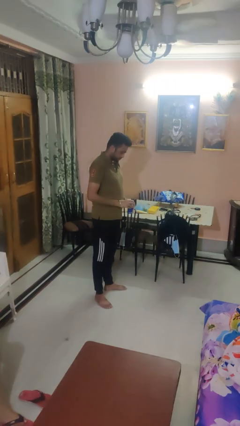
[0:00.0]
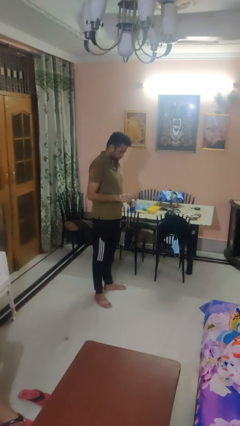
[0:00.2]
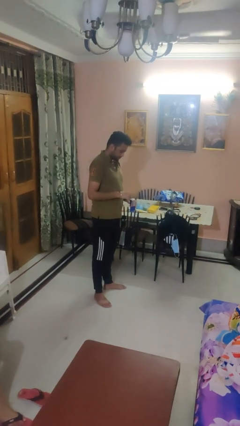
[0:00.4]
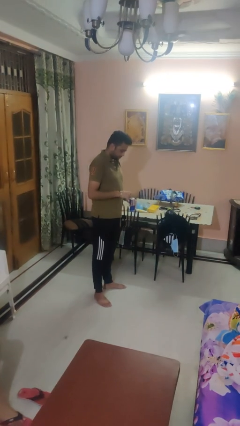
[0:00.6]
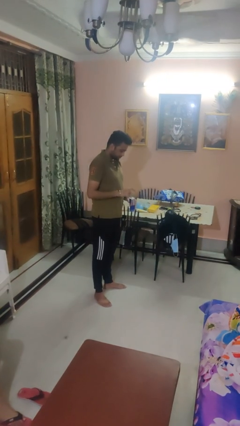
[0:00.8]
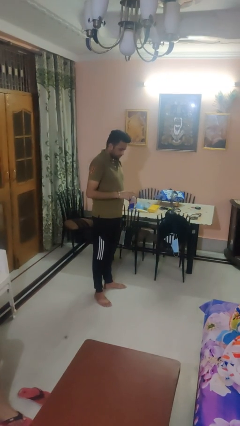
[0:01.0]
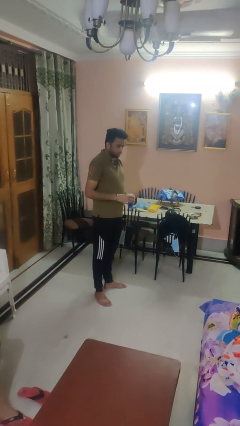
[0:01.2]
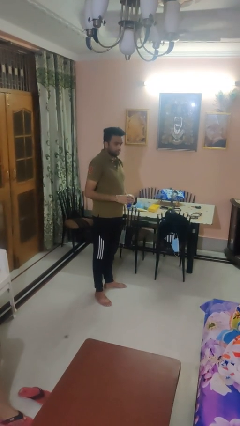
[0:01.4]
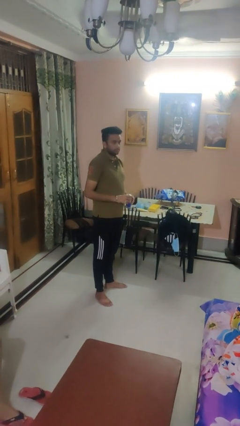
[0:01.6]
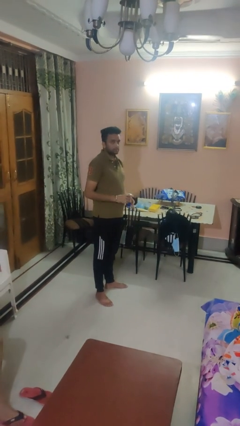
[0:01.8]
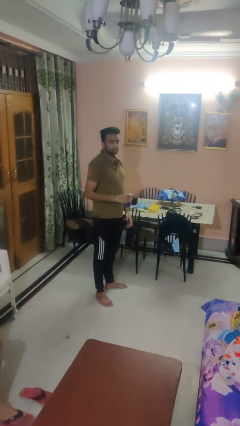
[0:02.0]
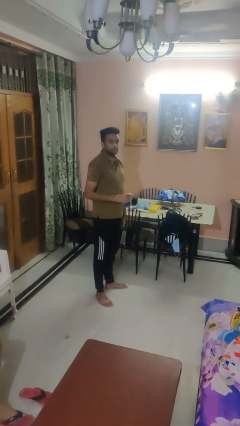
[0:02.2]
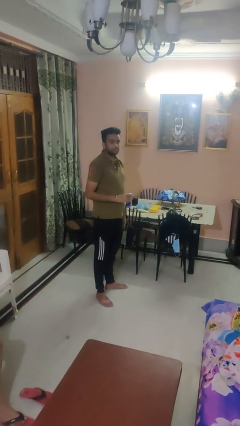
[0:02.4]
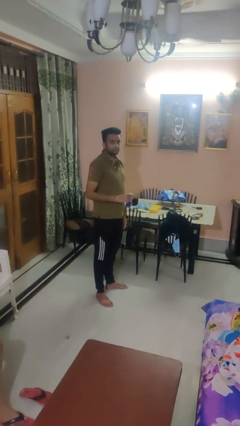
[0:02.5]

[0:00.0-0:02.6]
person opens beverage can

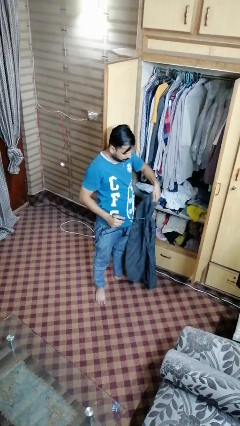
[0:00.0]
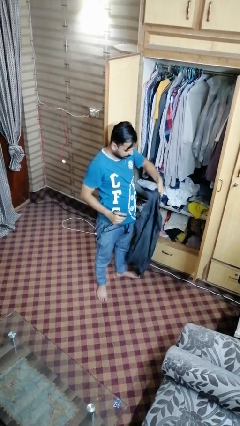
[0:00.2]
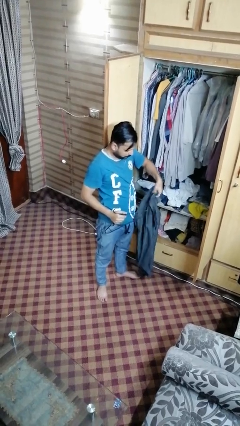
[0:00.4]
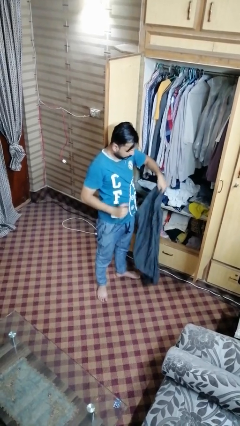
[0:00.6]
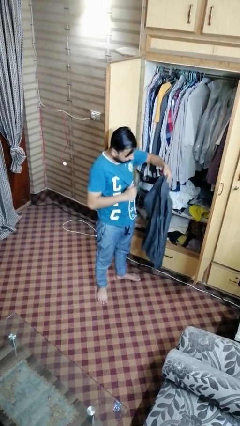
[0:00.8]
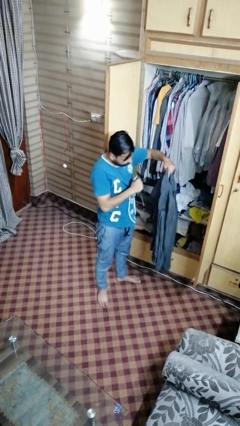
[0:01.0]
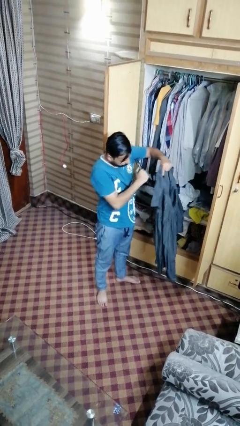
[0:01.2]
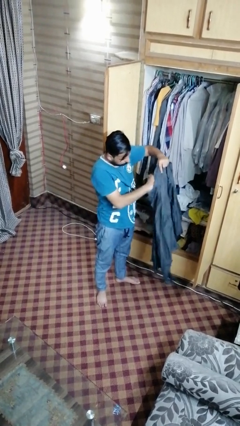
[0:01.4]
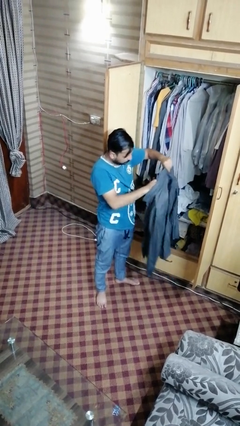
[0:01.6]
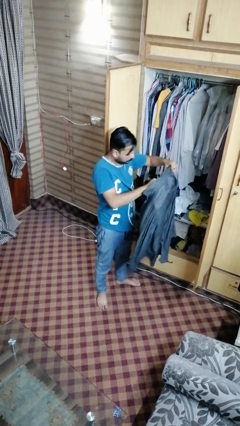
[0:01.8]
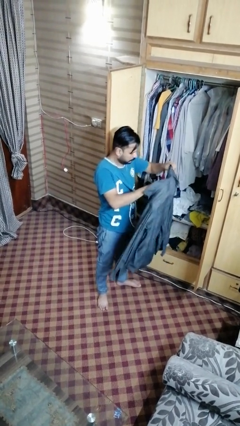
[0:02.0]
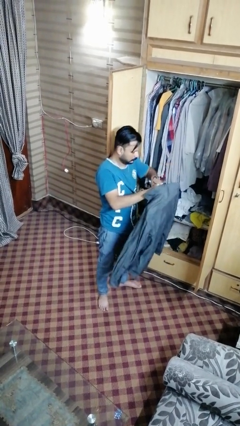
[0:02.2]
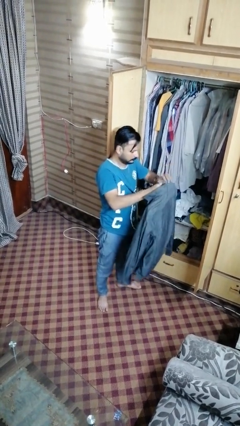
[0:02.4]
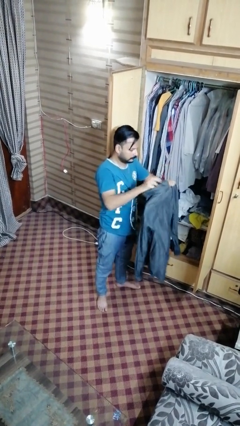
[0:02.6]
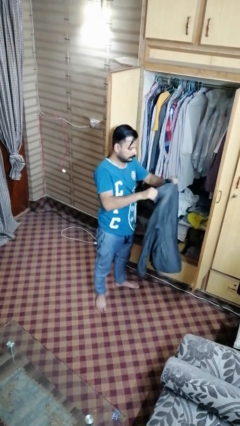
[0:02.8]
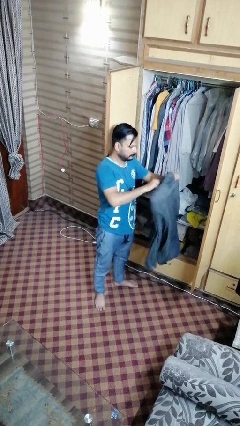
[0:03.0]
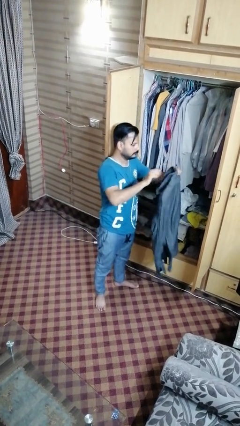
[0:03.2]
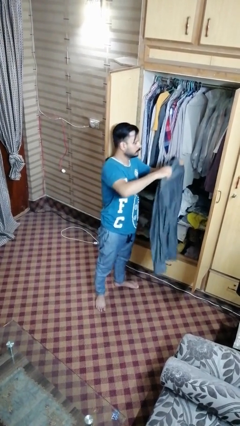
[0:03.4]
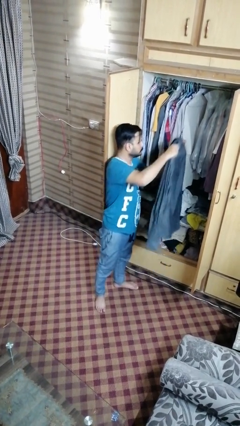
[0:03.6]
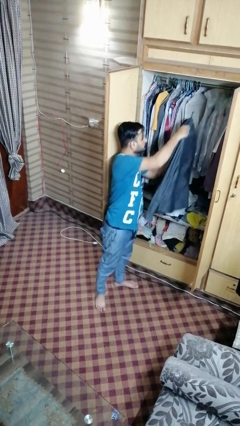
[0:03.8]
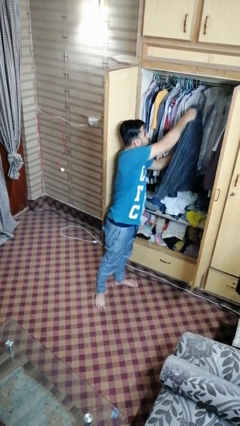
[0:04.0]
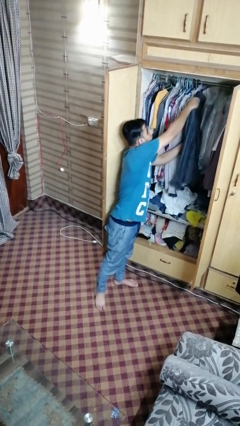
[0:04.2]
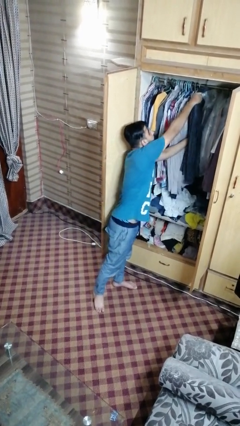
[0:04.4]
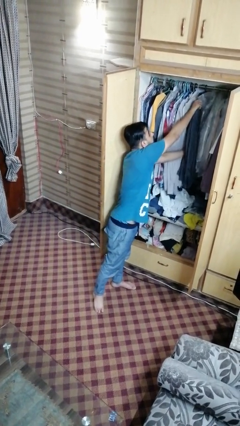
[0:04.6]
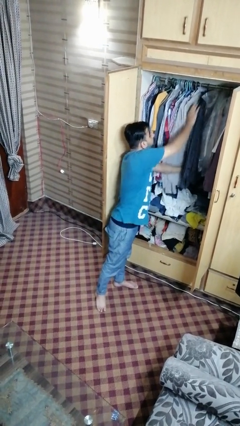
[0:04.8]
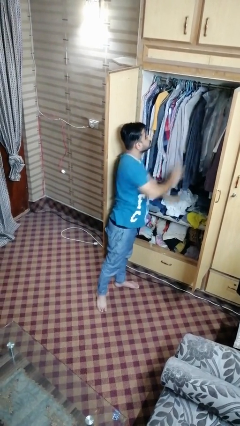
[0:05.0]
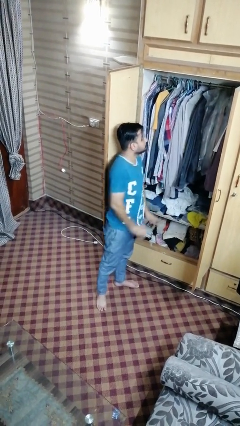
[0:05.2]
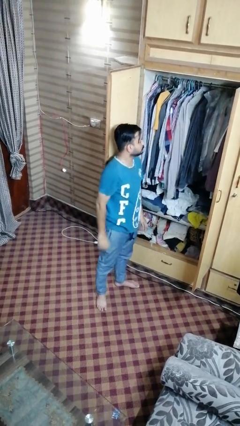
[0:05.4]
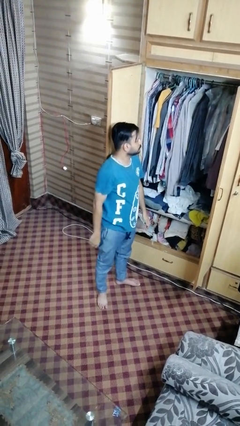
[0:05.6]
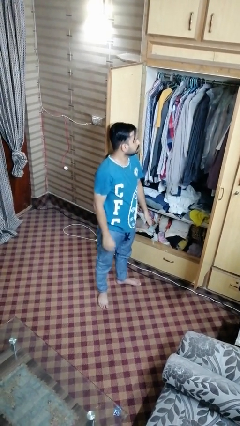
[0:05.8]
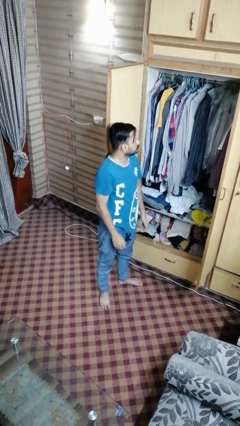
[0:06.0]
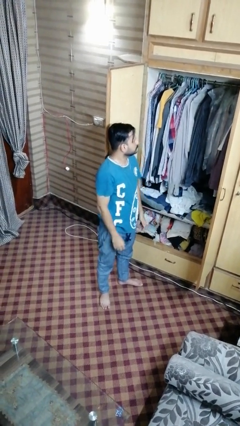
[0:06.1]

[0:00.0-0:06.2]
person puts clothes into dresser

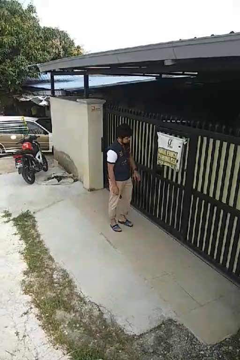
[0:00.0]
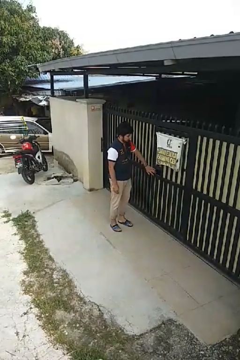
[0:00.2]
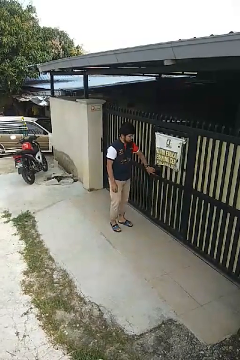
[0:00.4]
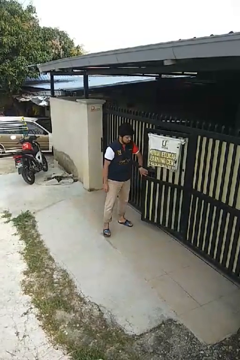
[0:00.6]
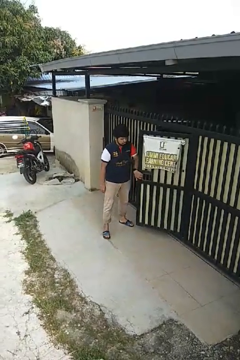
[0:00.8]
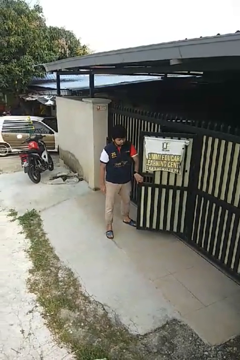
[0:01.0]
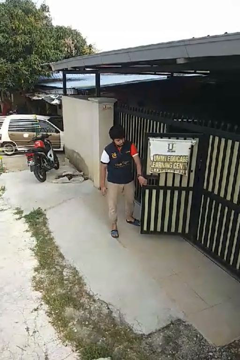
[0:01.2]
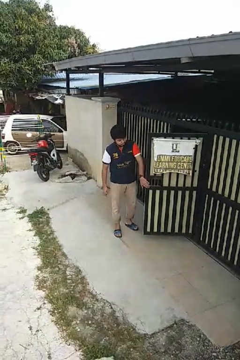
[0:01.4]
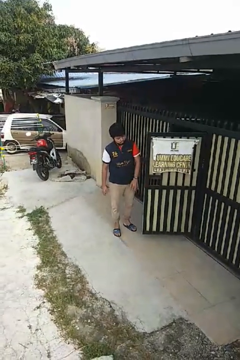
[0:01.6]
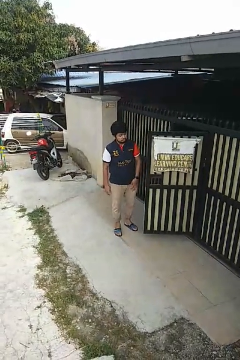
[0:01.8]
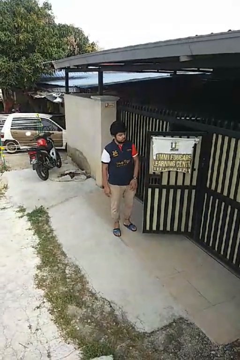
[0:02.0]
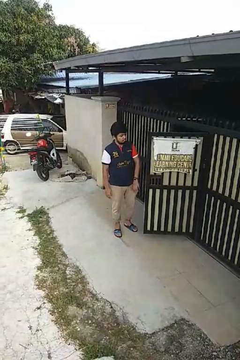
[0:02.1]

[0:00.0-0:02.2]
person opens gate

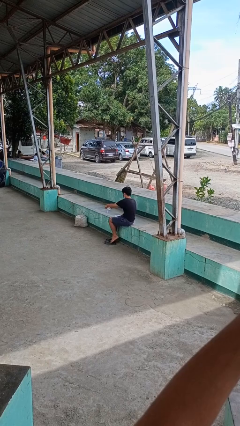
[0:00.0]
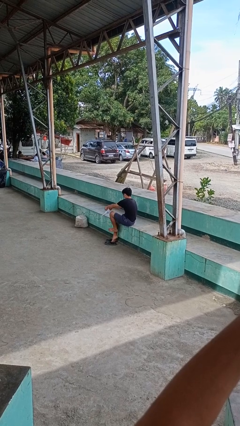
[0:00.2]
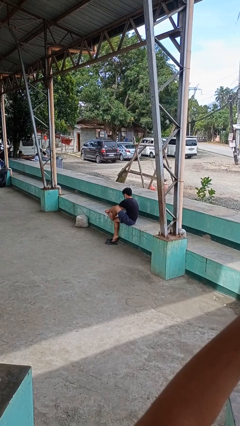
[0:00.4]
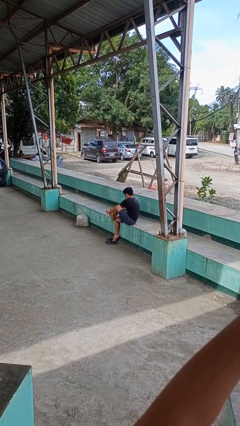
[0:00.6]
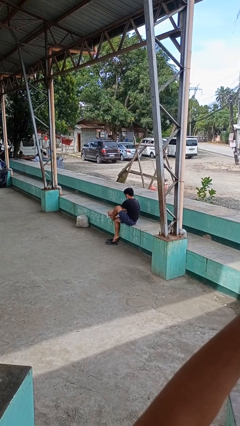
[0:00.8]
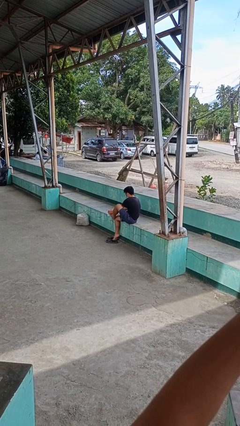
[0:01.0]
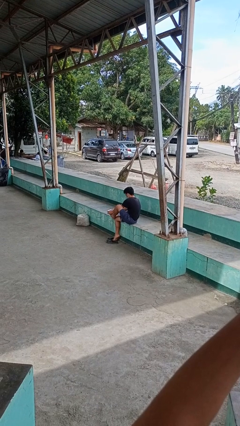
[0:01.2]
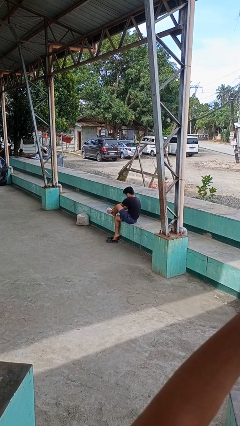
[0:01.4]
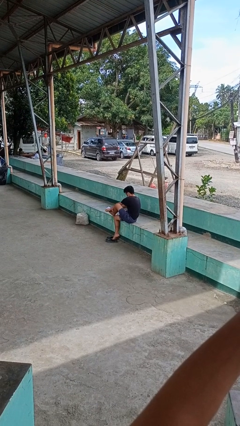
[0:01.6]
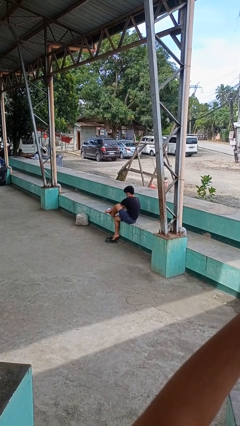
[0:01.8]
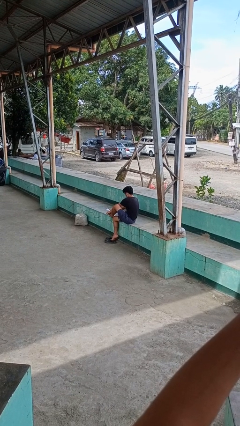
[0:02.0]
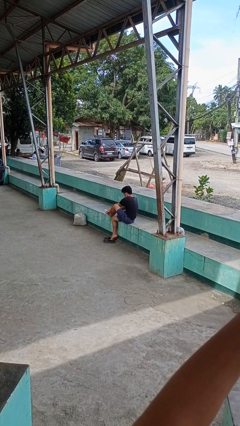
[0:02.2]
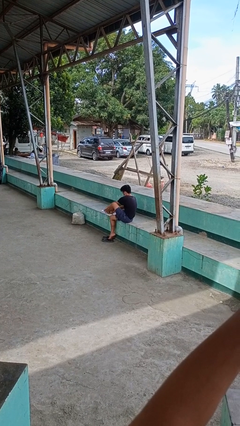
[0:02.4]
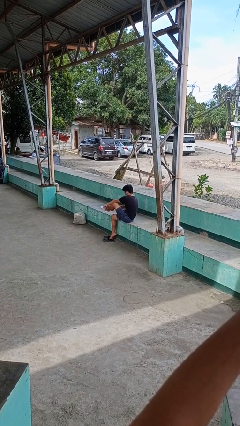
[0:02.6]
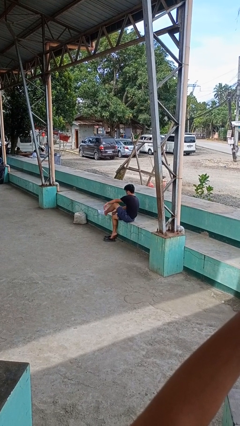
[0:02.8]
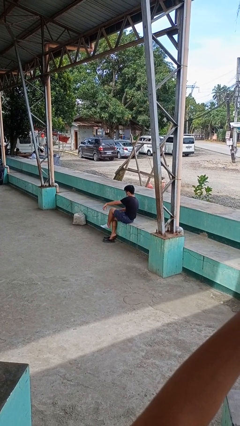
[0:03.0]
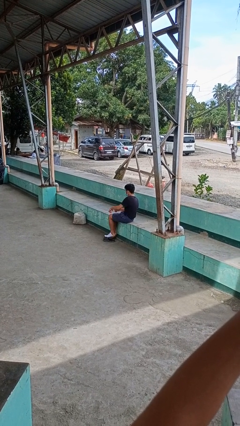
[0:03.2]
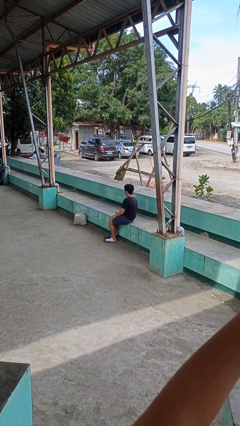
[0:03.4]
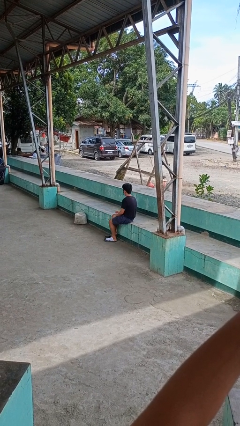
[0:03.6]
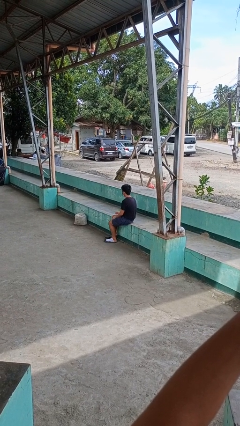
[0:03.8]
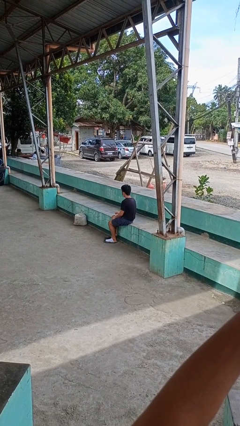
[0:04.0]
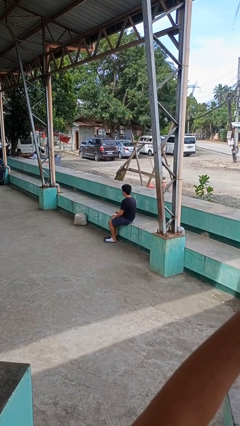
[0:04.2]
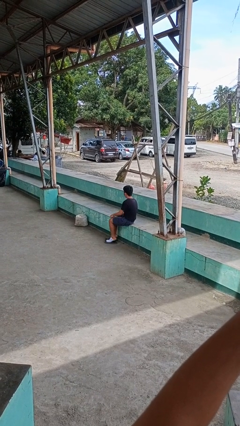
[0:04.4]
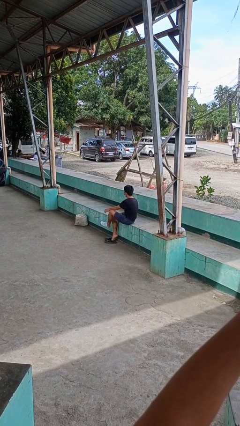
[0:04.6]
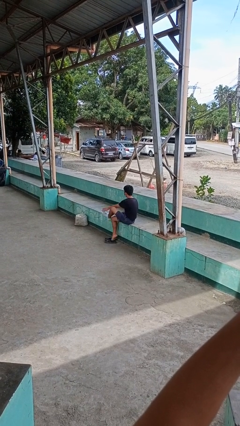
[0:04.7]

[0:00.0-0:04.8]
person puts on socks

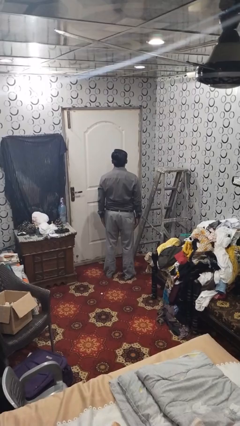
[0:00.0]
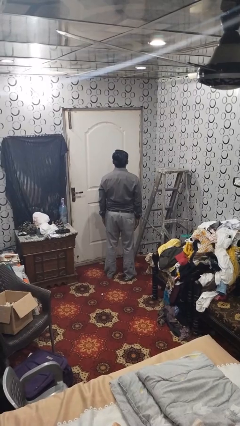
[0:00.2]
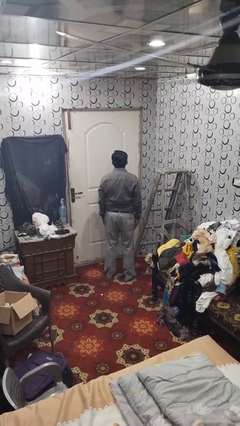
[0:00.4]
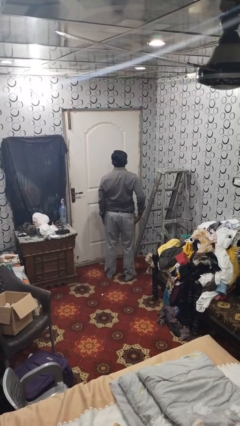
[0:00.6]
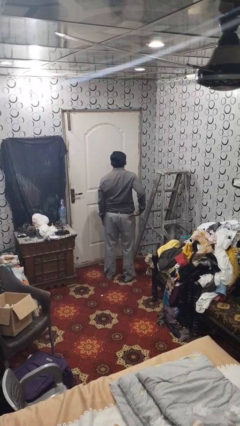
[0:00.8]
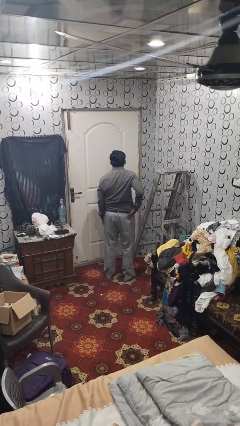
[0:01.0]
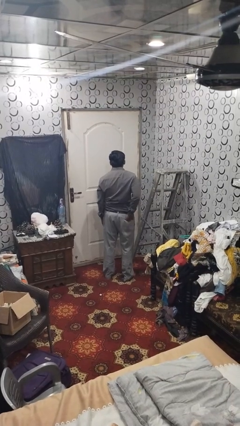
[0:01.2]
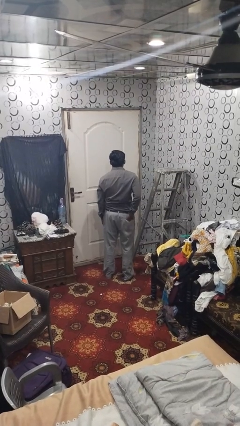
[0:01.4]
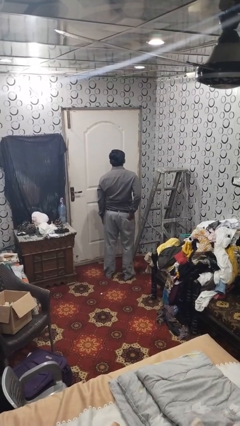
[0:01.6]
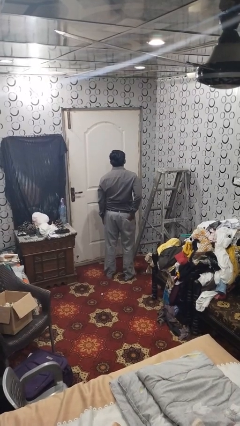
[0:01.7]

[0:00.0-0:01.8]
person puts hands in back pockets
